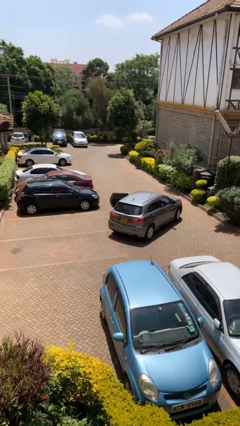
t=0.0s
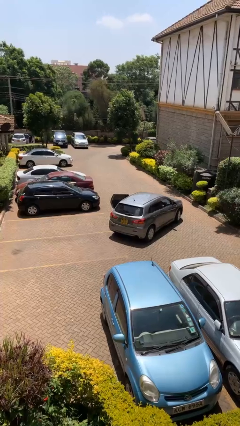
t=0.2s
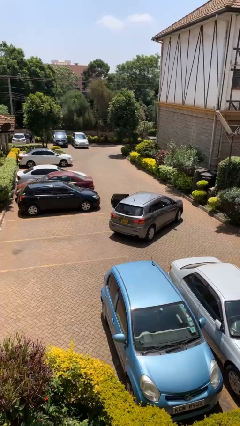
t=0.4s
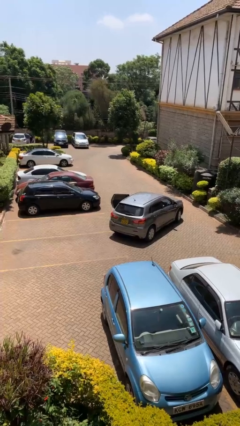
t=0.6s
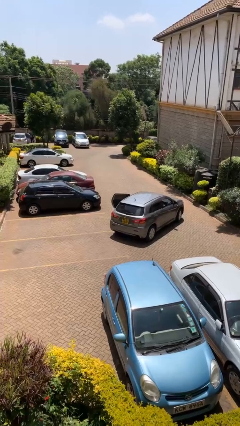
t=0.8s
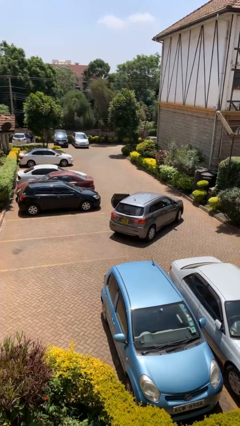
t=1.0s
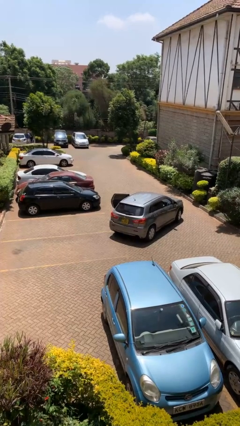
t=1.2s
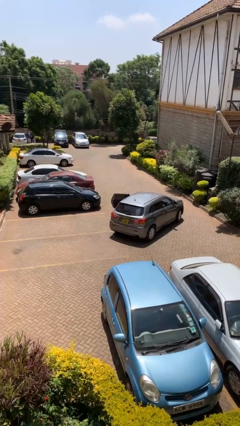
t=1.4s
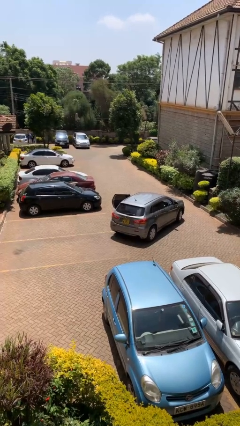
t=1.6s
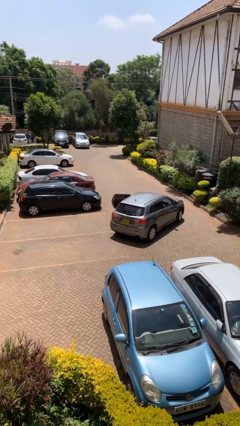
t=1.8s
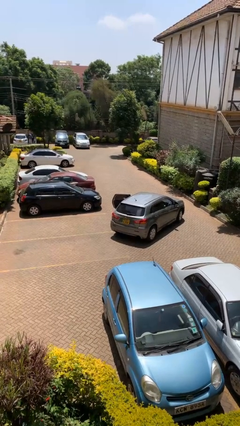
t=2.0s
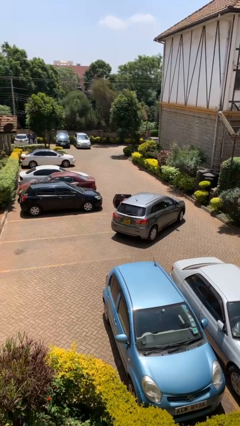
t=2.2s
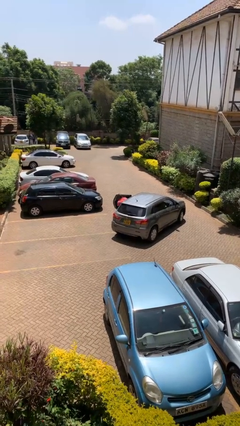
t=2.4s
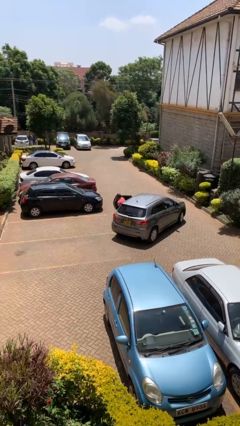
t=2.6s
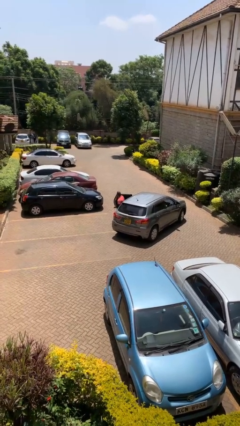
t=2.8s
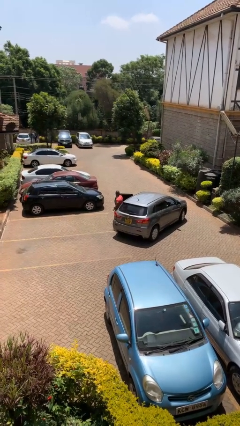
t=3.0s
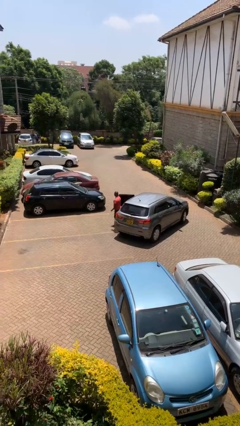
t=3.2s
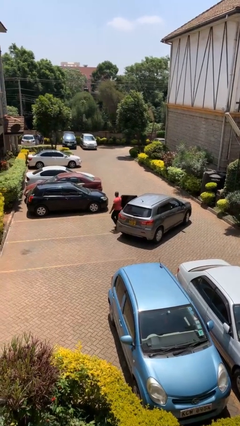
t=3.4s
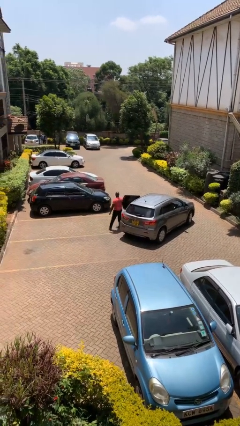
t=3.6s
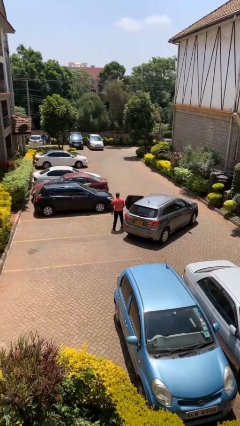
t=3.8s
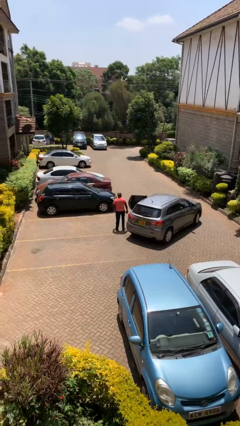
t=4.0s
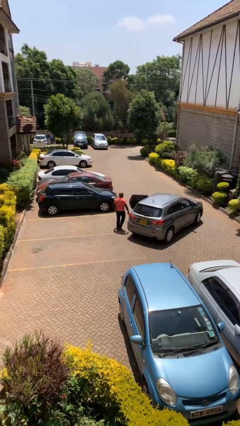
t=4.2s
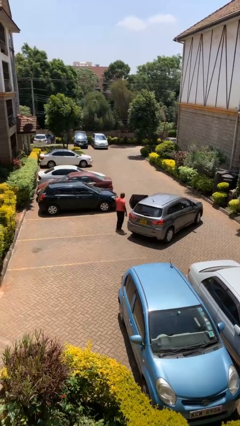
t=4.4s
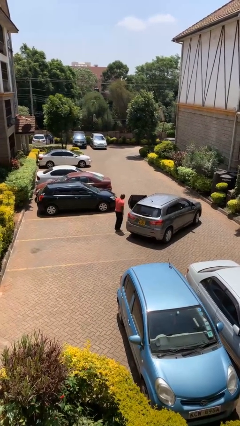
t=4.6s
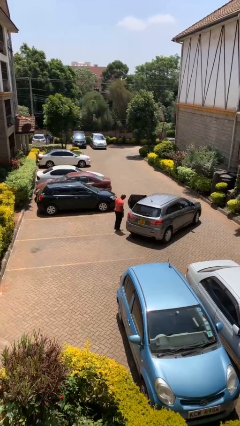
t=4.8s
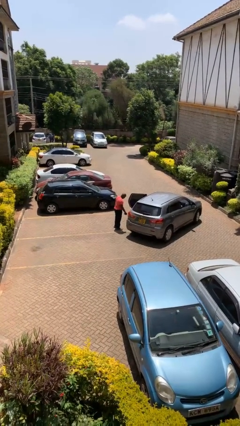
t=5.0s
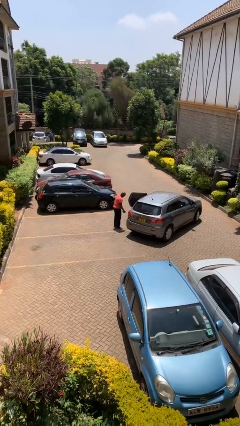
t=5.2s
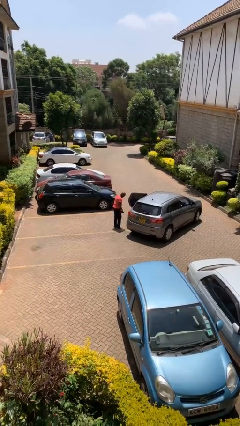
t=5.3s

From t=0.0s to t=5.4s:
person exits car

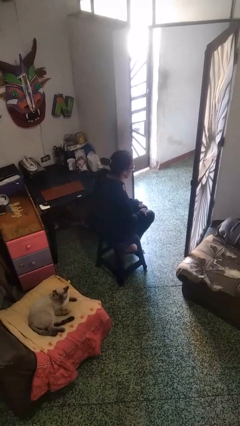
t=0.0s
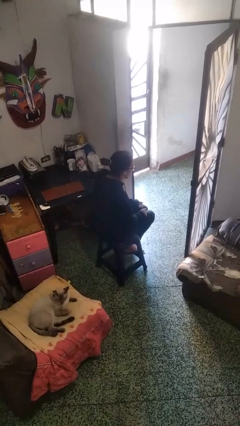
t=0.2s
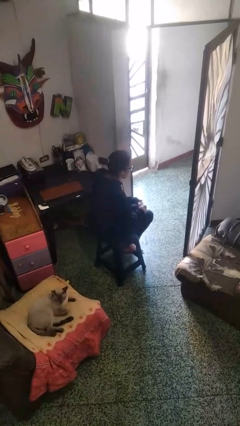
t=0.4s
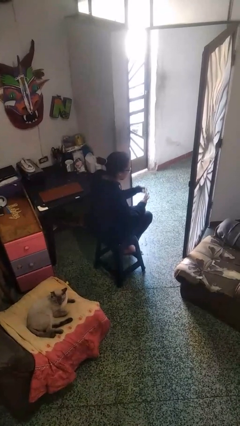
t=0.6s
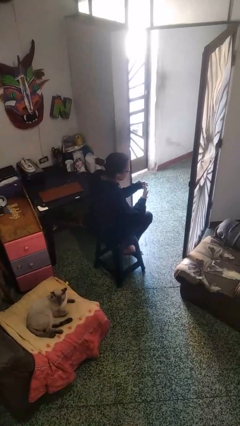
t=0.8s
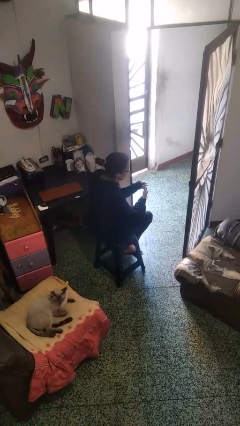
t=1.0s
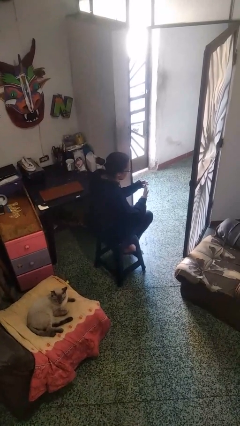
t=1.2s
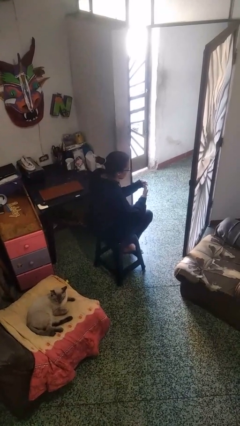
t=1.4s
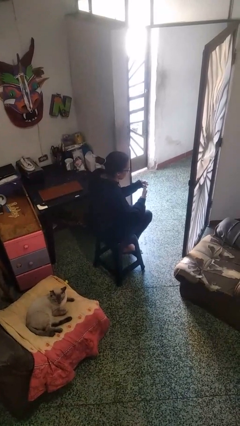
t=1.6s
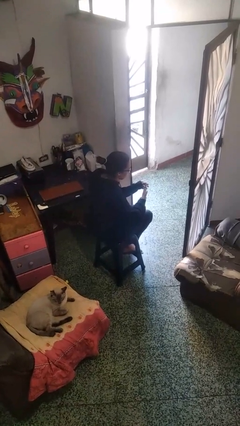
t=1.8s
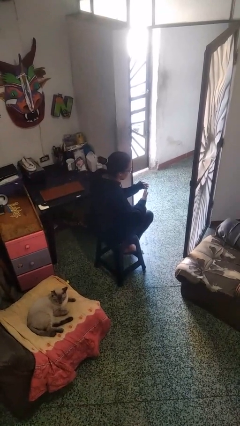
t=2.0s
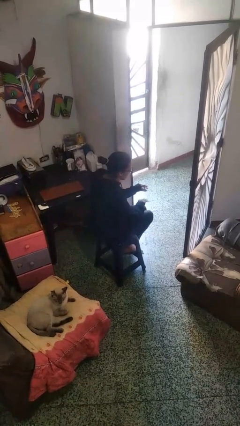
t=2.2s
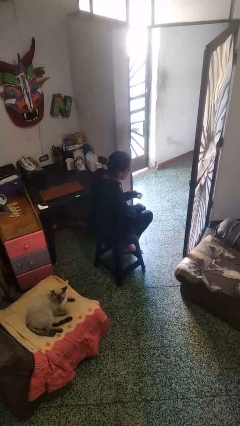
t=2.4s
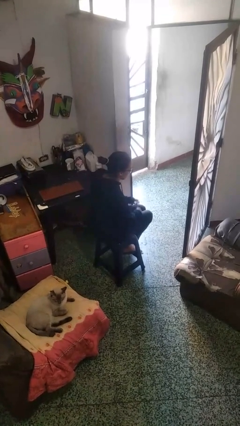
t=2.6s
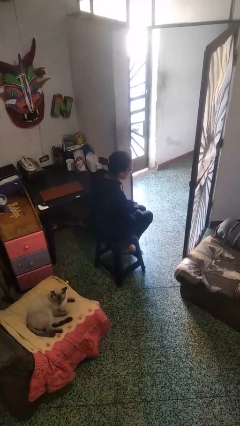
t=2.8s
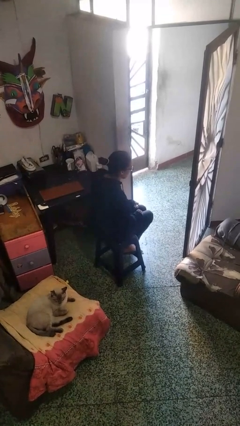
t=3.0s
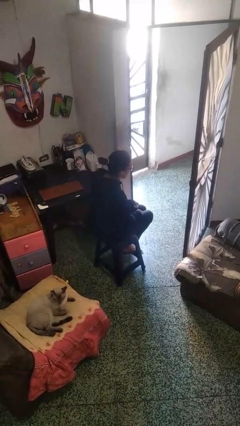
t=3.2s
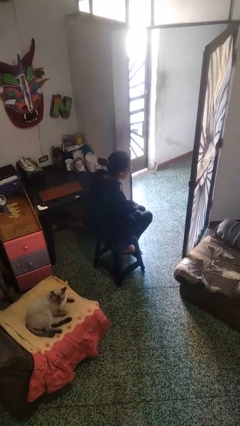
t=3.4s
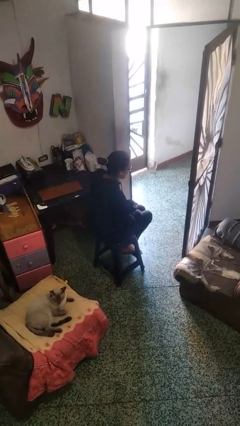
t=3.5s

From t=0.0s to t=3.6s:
person clips fingernails

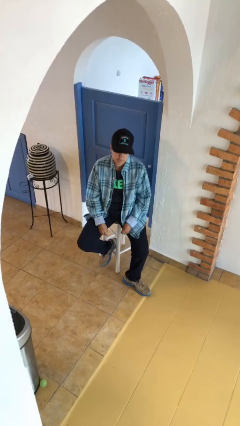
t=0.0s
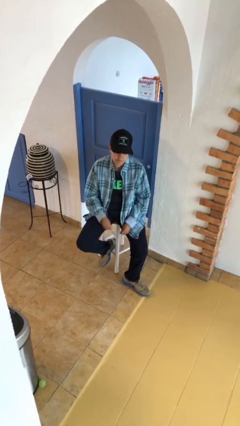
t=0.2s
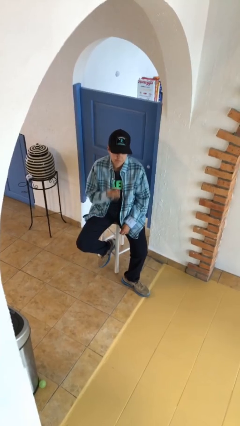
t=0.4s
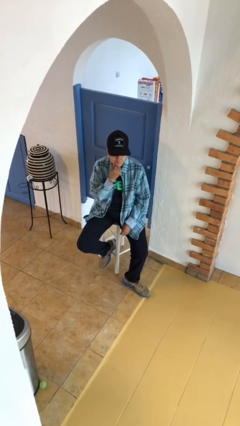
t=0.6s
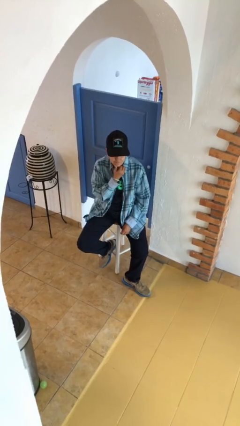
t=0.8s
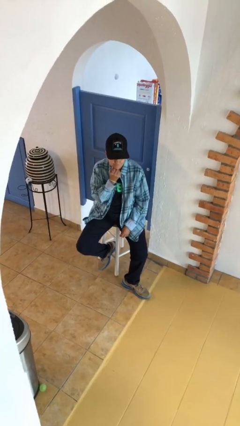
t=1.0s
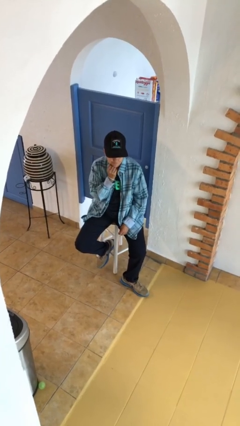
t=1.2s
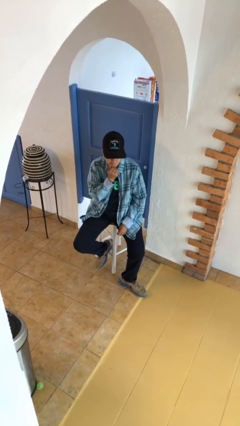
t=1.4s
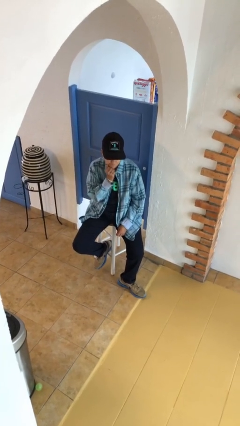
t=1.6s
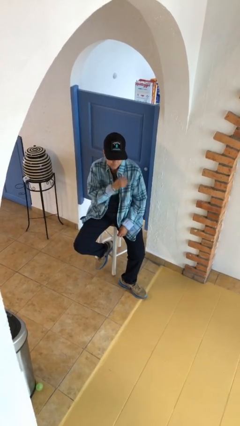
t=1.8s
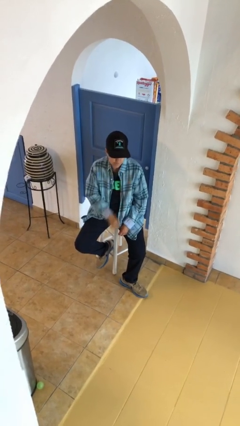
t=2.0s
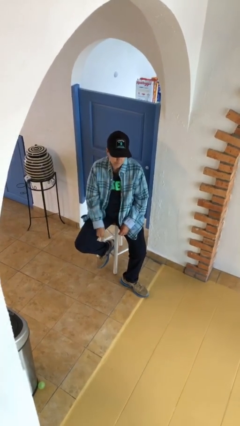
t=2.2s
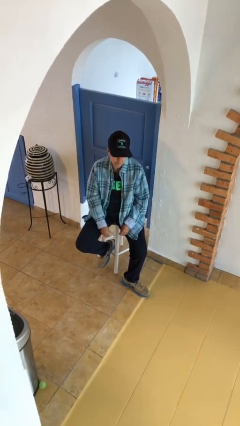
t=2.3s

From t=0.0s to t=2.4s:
person strokes chin

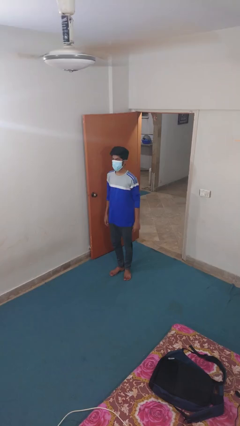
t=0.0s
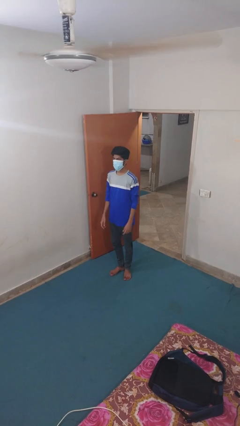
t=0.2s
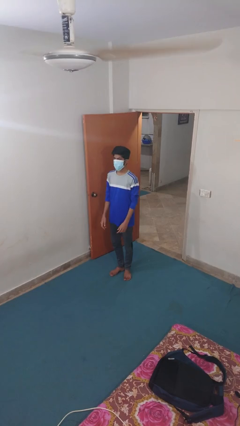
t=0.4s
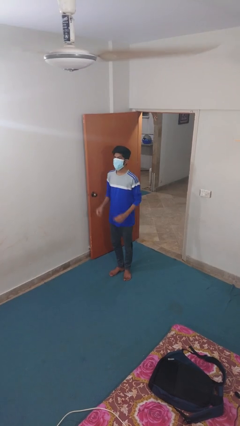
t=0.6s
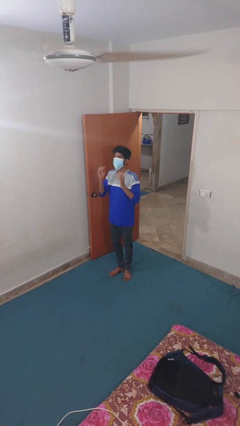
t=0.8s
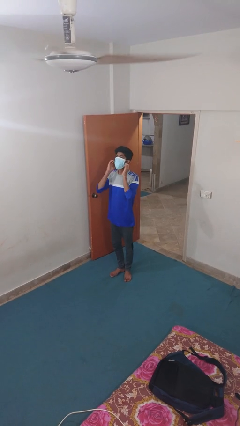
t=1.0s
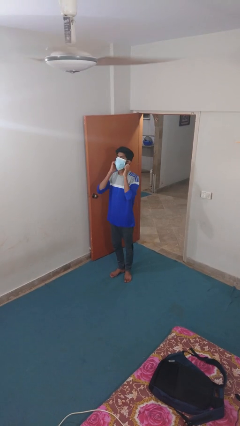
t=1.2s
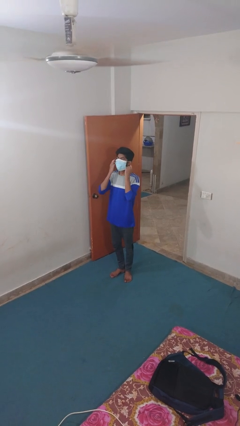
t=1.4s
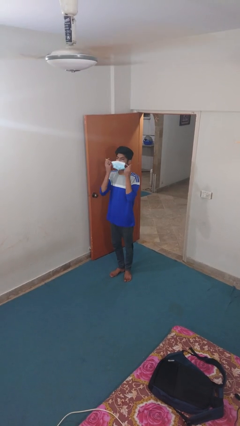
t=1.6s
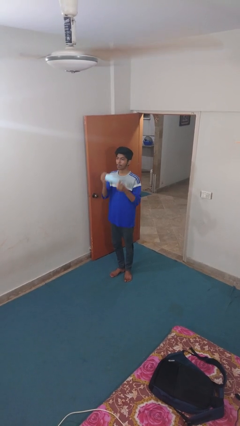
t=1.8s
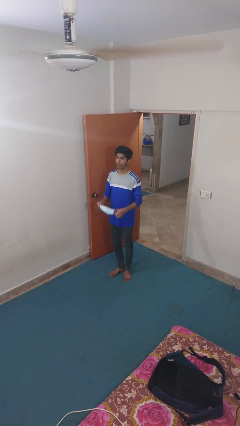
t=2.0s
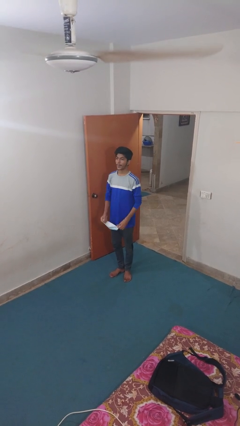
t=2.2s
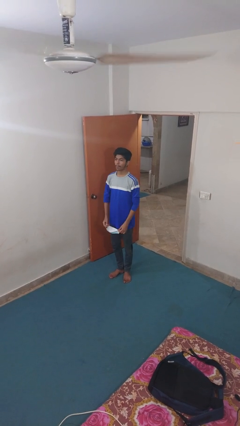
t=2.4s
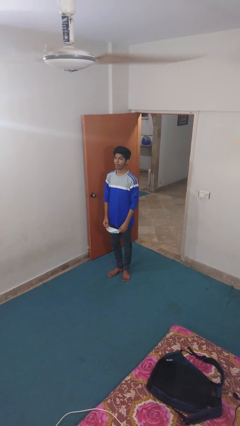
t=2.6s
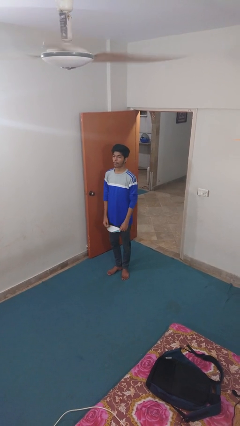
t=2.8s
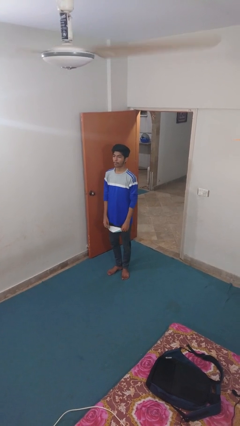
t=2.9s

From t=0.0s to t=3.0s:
person takes off facemask

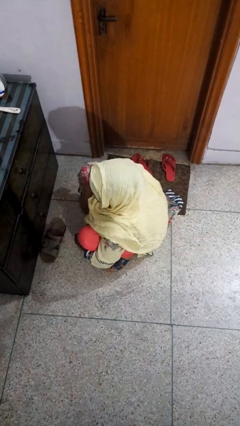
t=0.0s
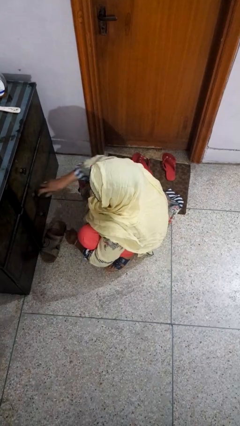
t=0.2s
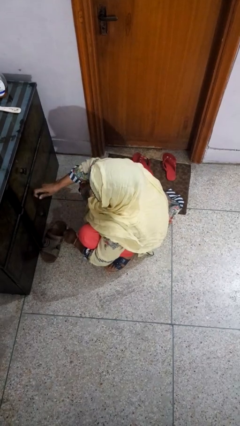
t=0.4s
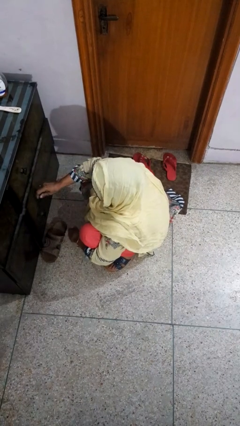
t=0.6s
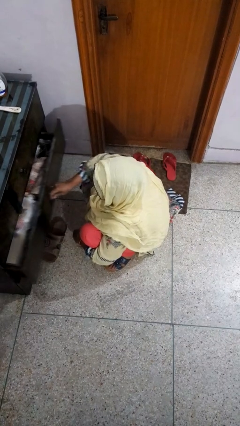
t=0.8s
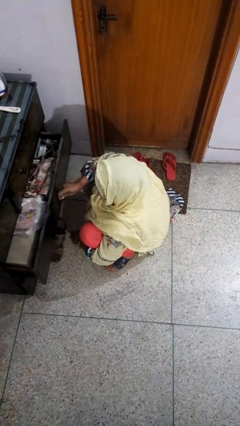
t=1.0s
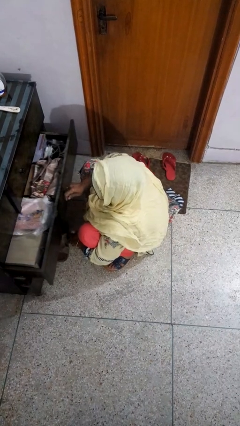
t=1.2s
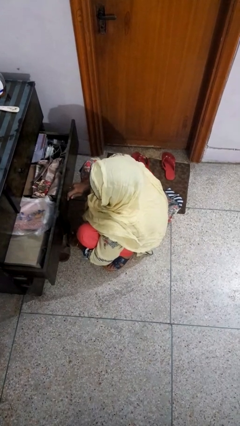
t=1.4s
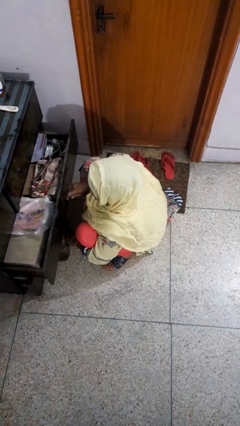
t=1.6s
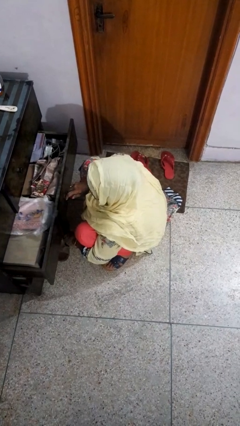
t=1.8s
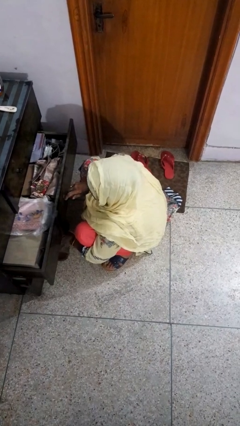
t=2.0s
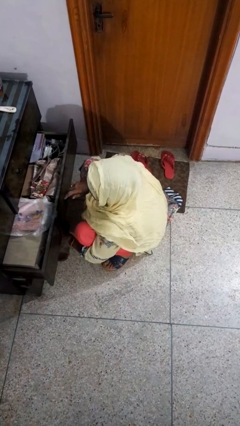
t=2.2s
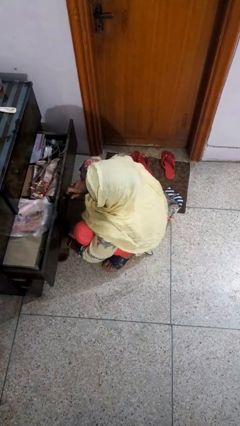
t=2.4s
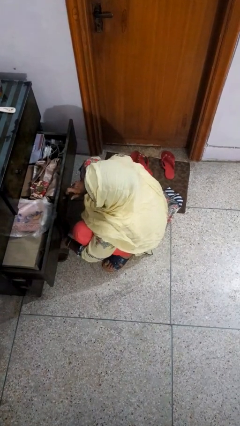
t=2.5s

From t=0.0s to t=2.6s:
person opens dresser drawer

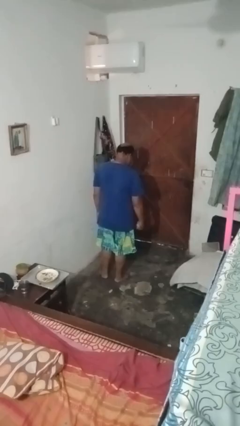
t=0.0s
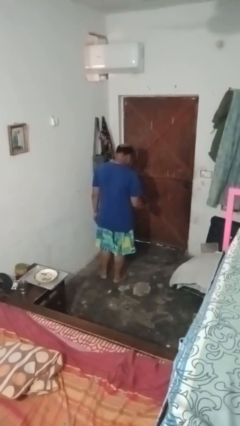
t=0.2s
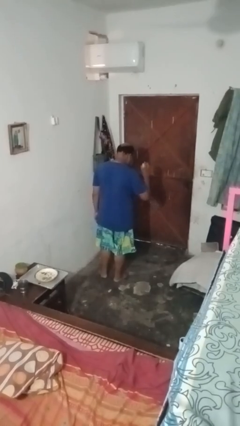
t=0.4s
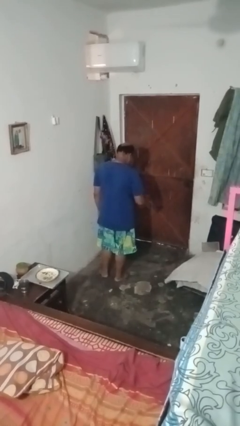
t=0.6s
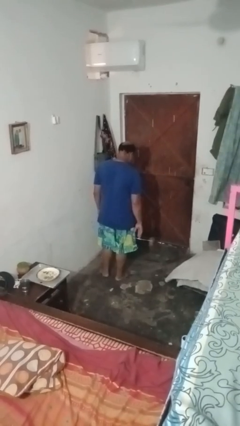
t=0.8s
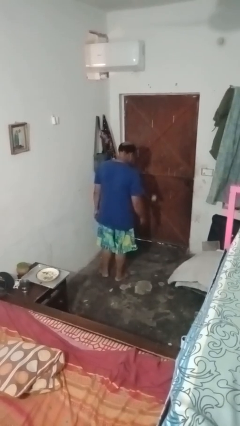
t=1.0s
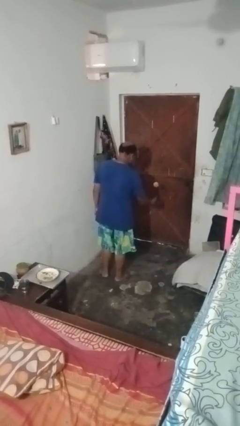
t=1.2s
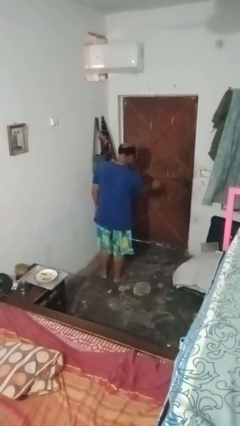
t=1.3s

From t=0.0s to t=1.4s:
person bounces ball on floor
